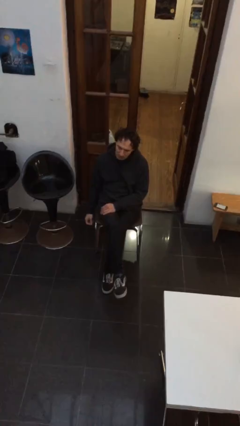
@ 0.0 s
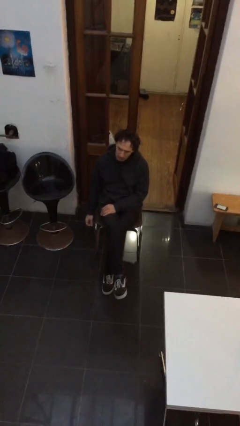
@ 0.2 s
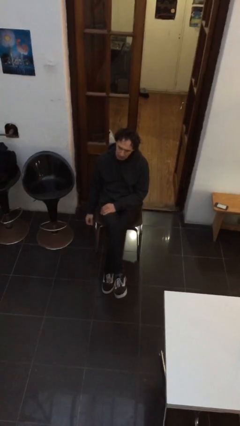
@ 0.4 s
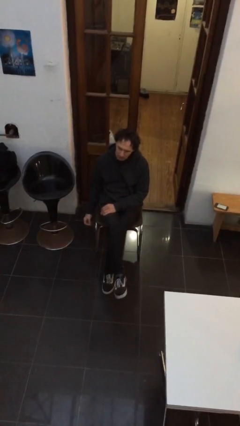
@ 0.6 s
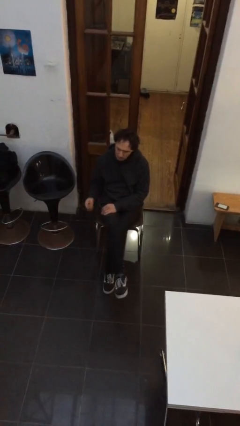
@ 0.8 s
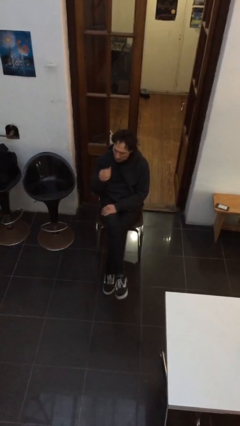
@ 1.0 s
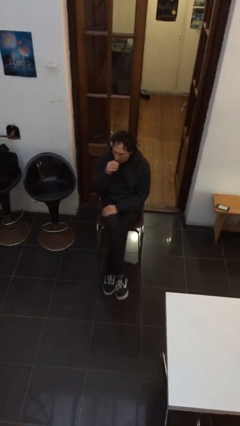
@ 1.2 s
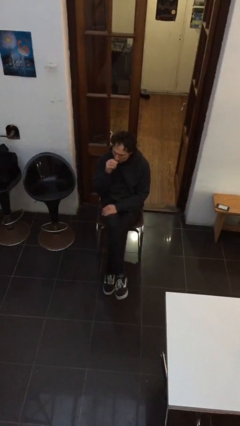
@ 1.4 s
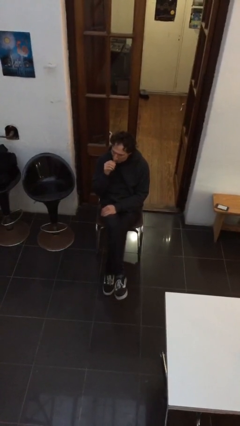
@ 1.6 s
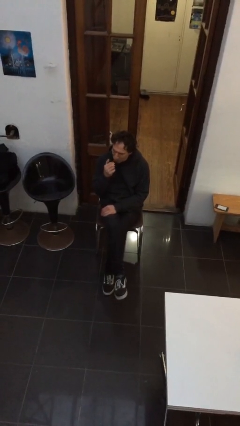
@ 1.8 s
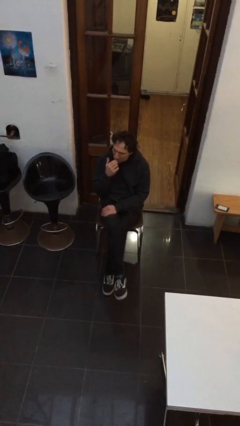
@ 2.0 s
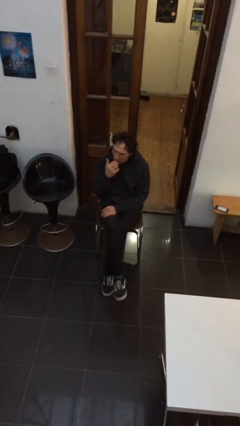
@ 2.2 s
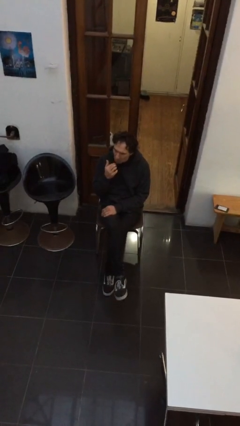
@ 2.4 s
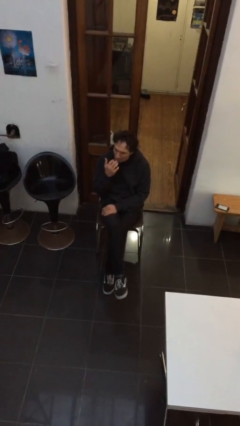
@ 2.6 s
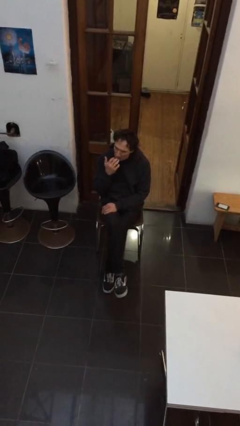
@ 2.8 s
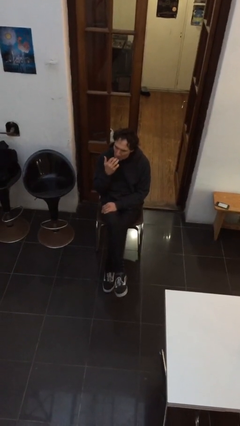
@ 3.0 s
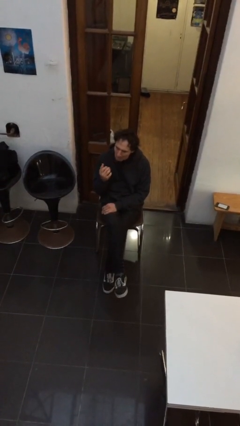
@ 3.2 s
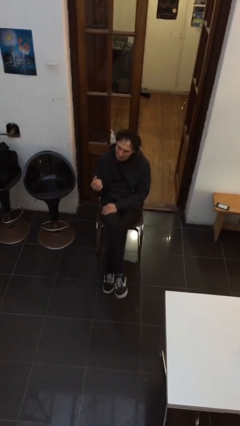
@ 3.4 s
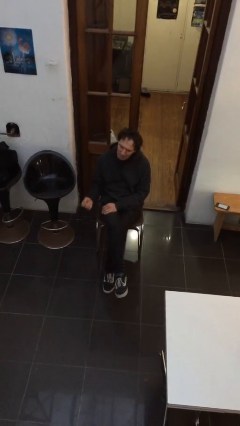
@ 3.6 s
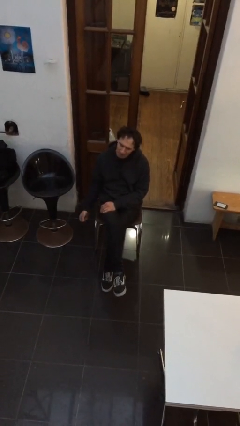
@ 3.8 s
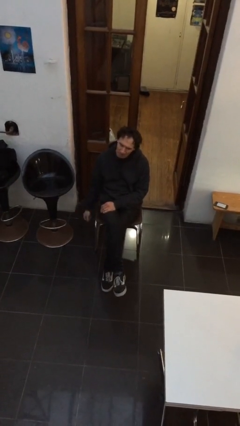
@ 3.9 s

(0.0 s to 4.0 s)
person licks fingers

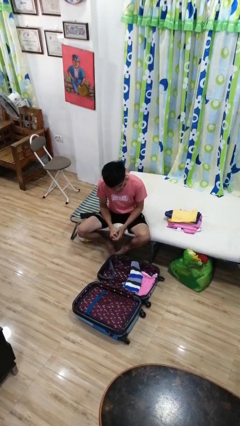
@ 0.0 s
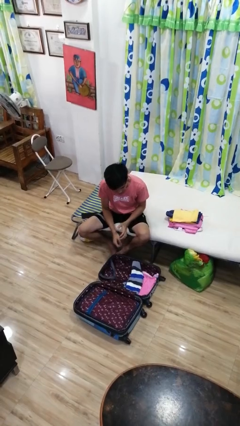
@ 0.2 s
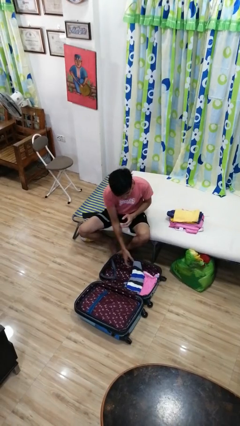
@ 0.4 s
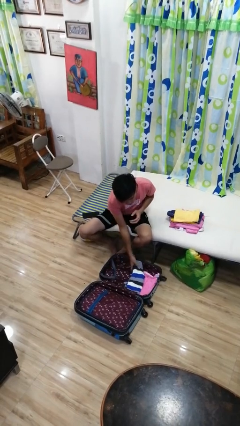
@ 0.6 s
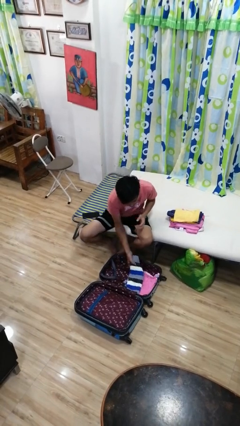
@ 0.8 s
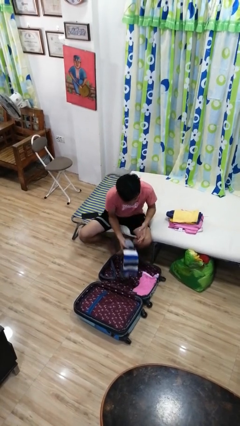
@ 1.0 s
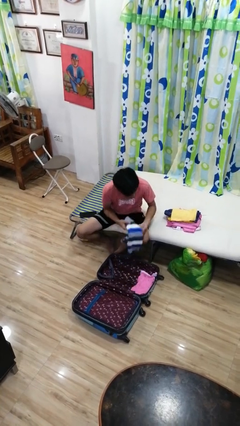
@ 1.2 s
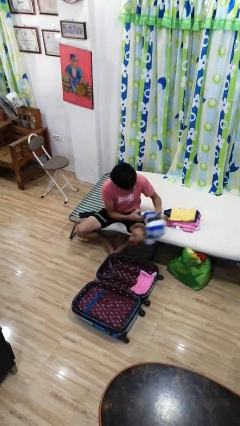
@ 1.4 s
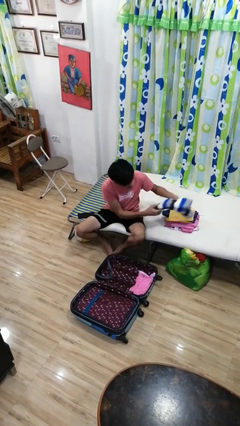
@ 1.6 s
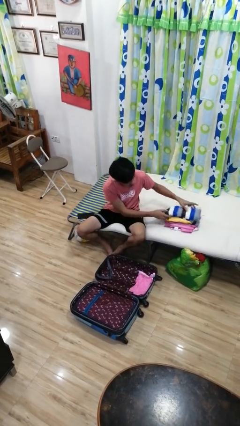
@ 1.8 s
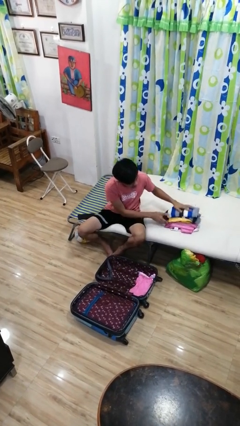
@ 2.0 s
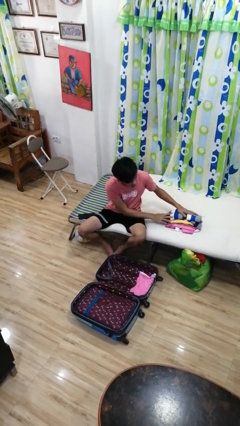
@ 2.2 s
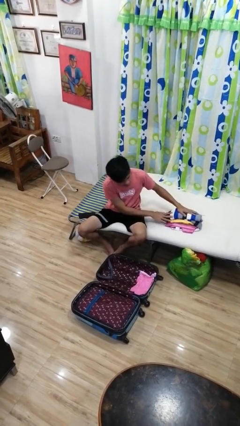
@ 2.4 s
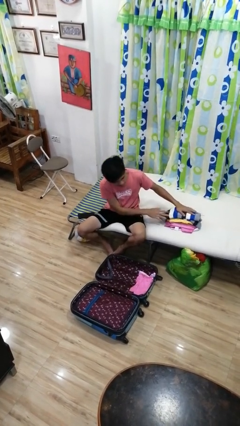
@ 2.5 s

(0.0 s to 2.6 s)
person unloads clothes from suitcase

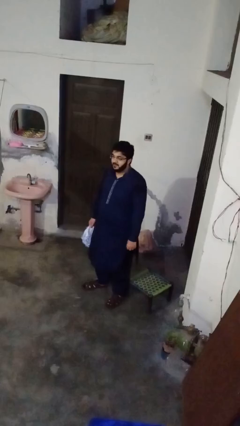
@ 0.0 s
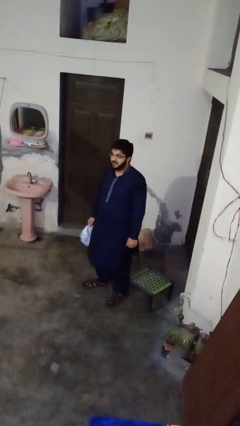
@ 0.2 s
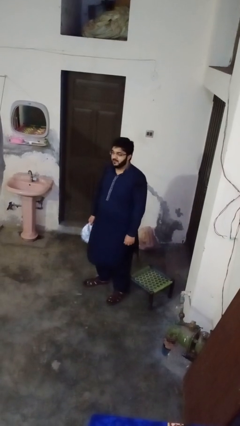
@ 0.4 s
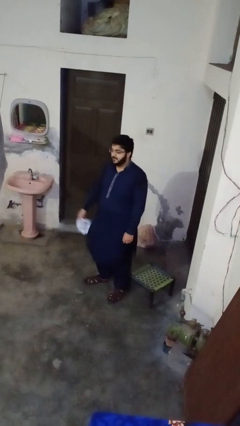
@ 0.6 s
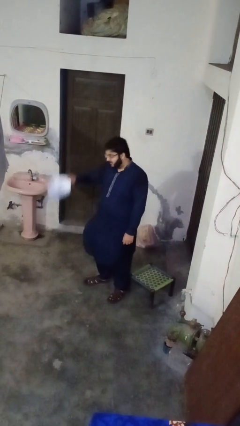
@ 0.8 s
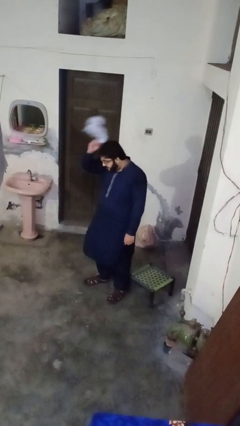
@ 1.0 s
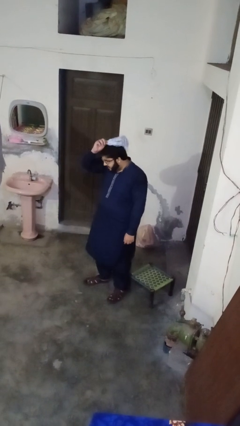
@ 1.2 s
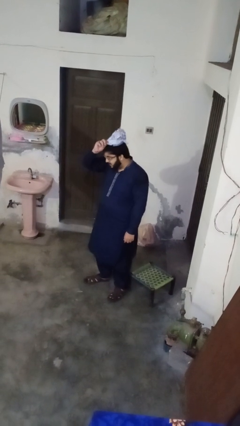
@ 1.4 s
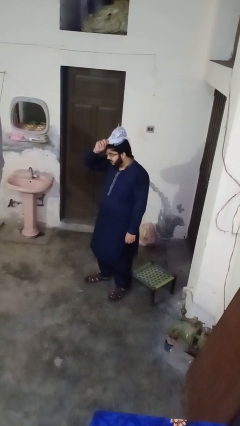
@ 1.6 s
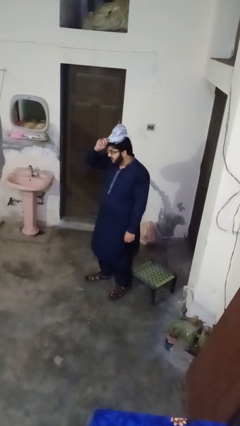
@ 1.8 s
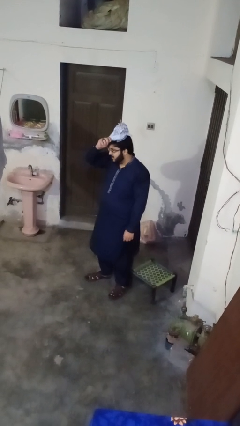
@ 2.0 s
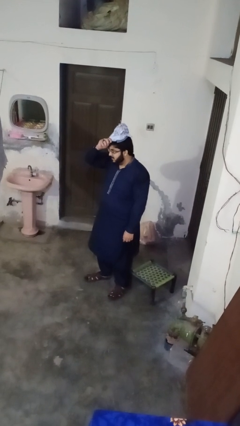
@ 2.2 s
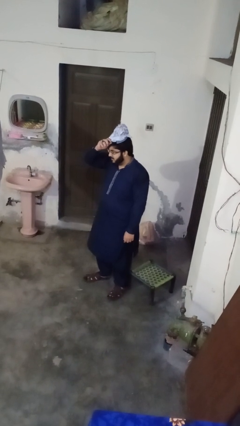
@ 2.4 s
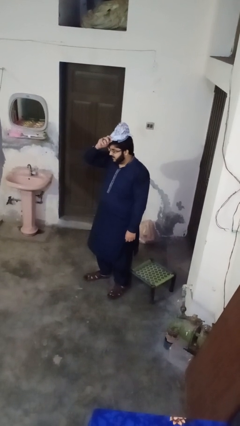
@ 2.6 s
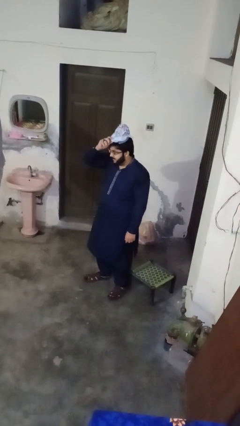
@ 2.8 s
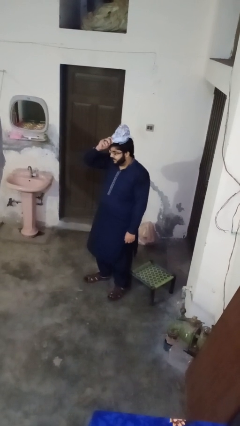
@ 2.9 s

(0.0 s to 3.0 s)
person puts on hat

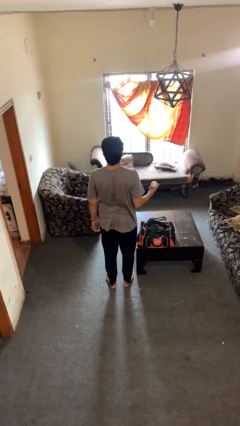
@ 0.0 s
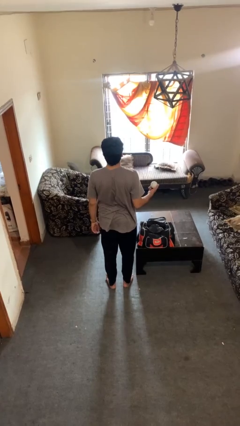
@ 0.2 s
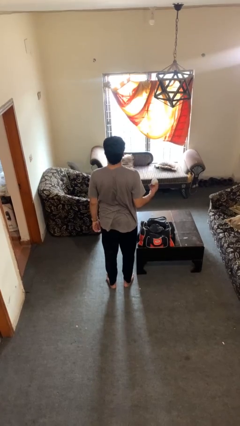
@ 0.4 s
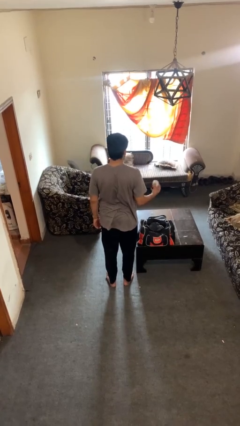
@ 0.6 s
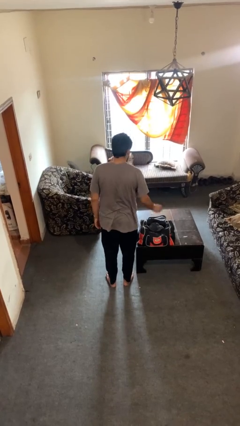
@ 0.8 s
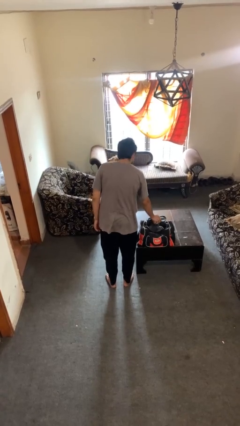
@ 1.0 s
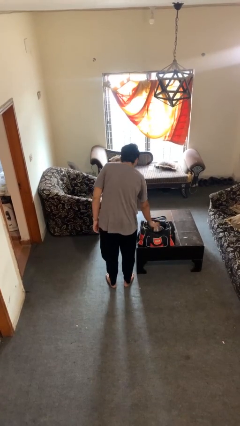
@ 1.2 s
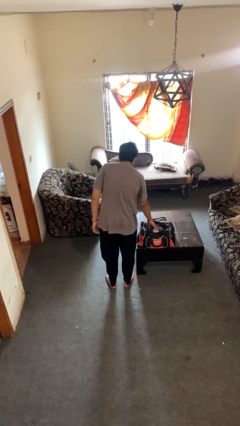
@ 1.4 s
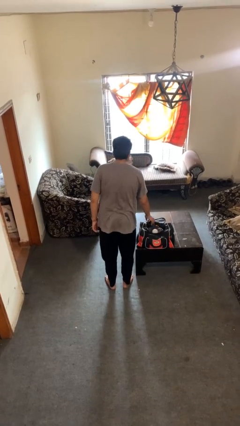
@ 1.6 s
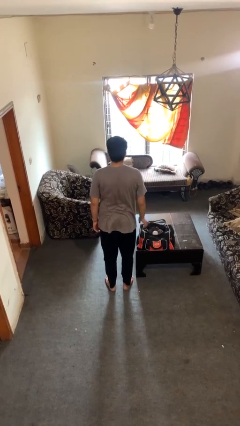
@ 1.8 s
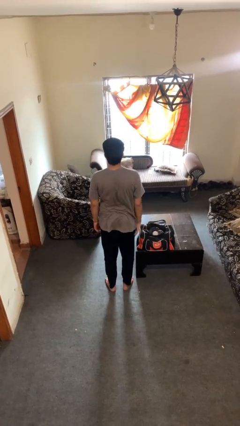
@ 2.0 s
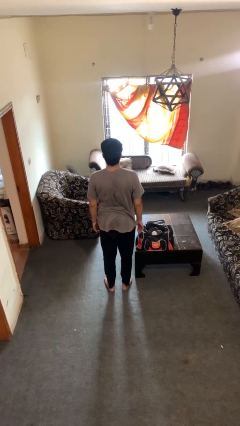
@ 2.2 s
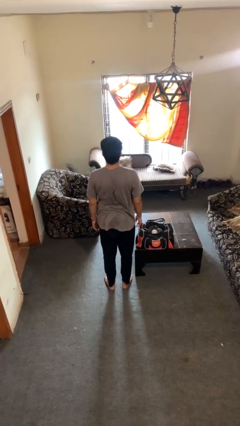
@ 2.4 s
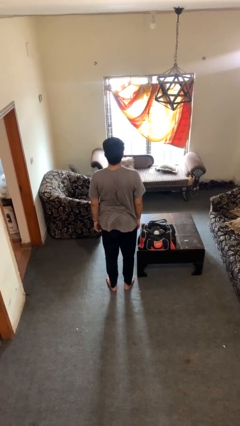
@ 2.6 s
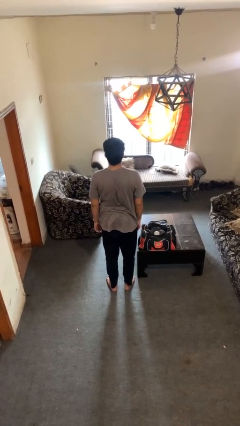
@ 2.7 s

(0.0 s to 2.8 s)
person puts object into bag

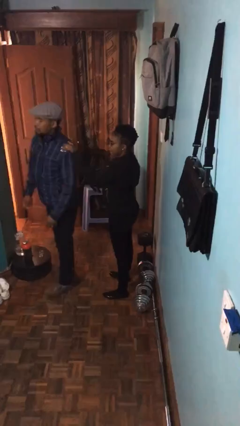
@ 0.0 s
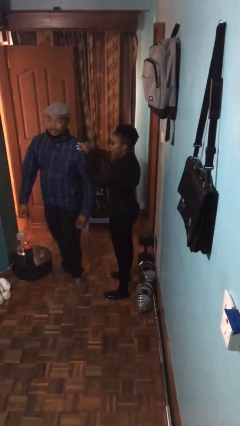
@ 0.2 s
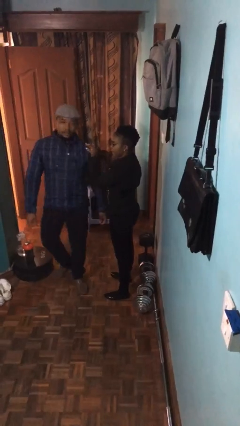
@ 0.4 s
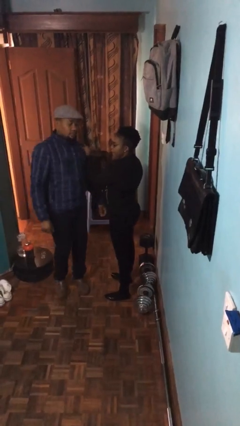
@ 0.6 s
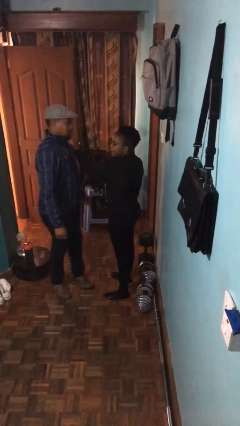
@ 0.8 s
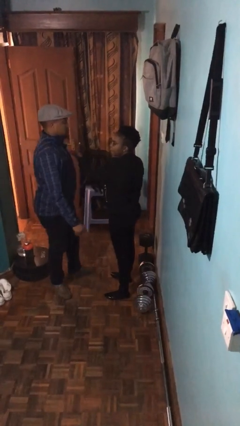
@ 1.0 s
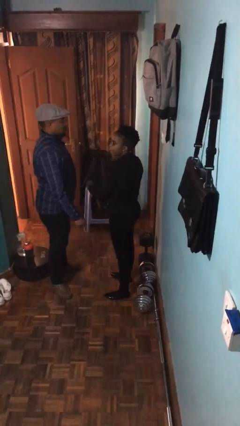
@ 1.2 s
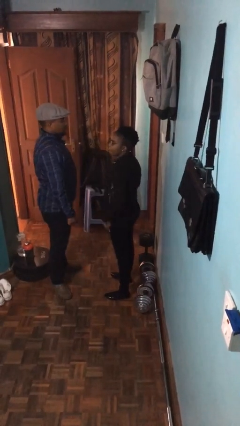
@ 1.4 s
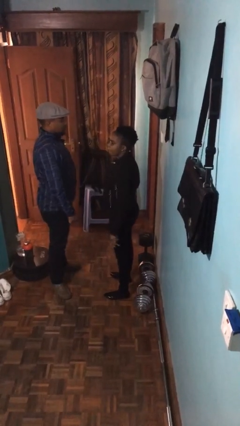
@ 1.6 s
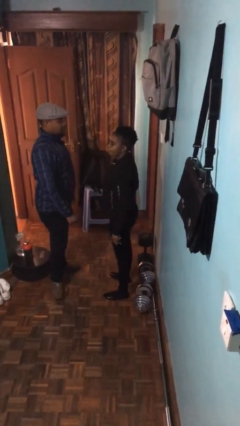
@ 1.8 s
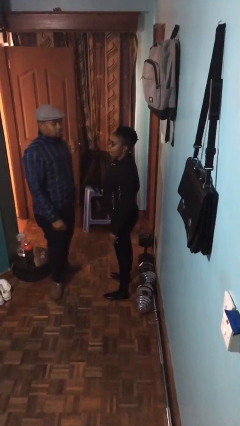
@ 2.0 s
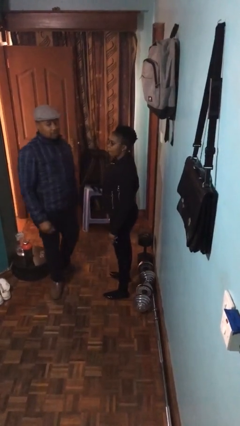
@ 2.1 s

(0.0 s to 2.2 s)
person spins person around

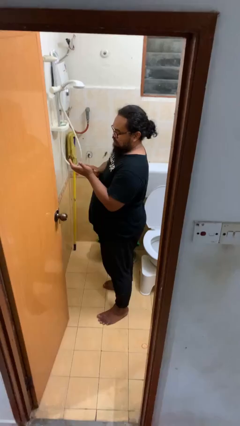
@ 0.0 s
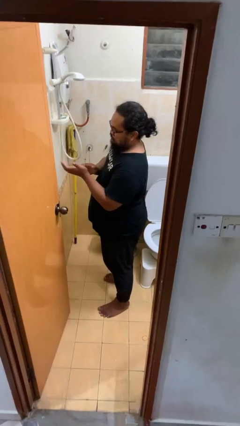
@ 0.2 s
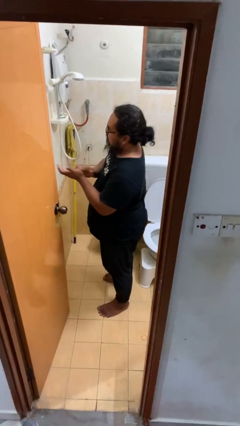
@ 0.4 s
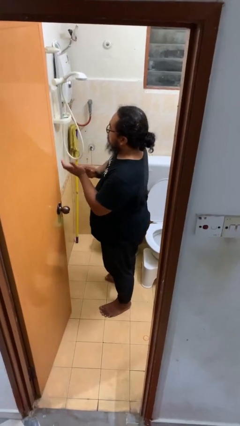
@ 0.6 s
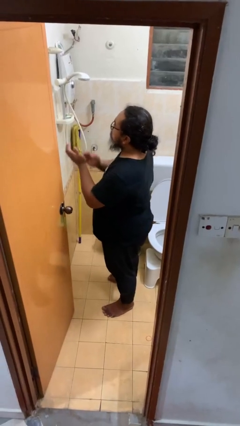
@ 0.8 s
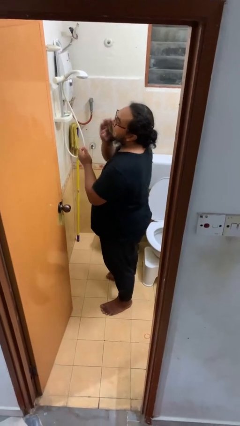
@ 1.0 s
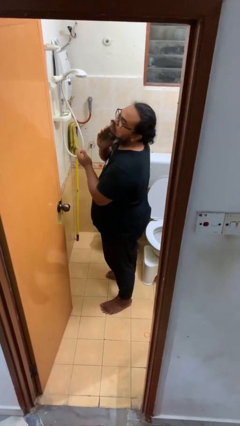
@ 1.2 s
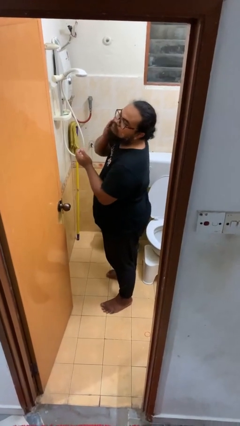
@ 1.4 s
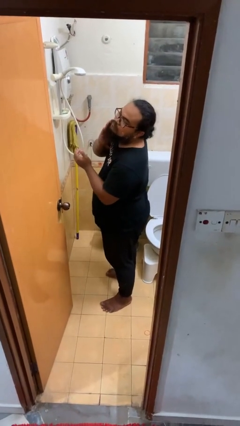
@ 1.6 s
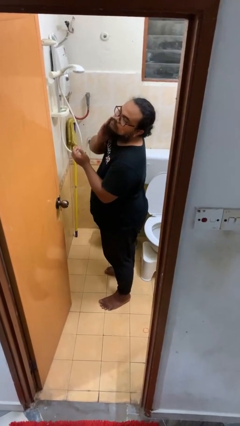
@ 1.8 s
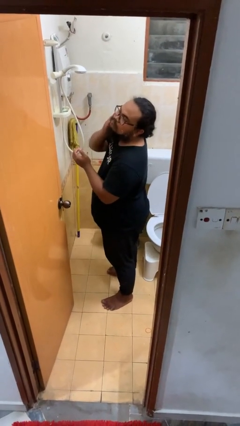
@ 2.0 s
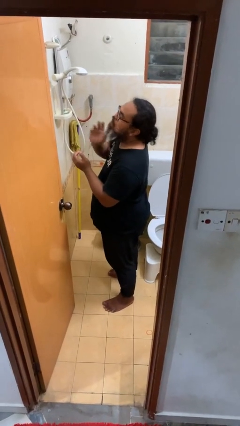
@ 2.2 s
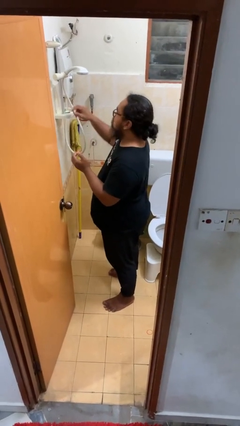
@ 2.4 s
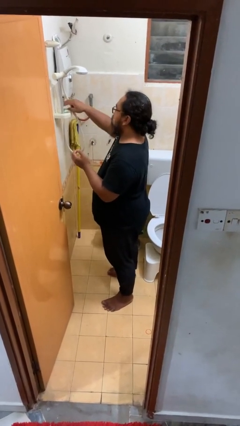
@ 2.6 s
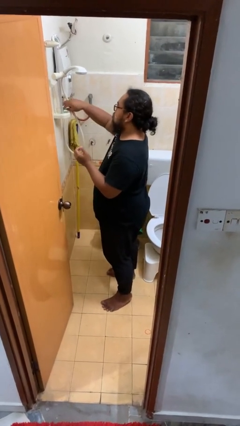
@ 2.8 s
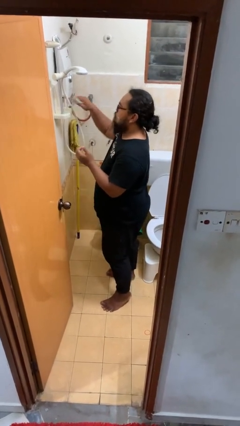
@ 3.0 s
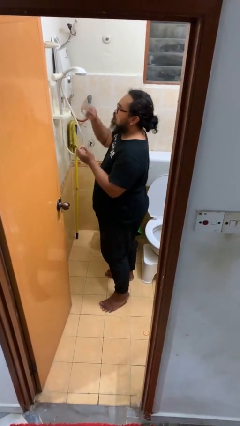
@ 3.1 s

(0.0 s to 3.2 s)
person applies shaving cream
